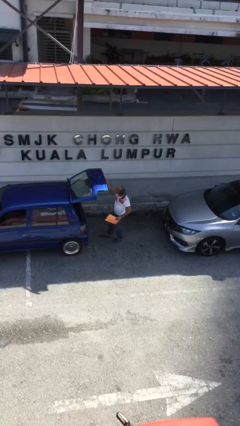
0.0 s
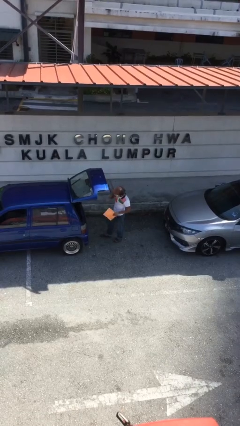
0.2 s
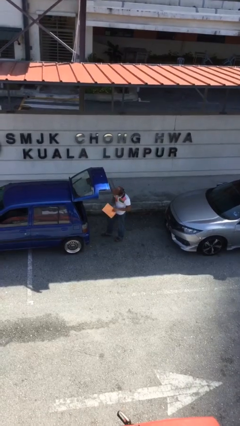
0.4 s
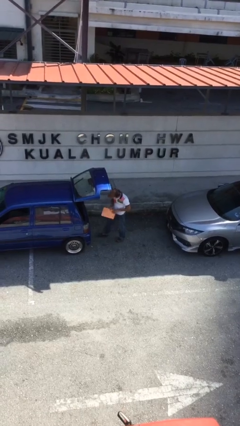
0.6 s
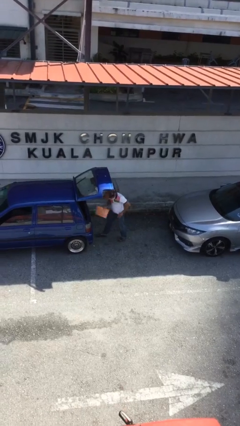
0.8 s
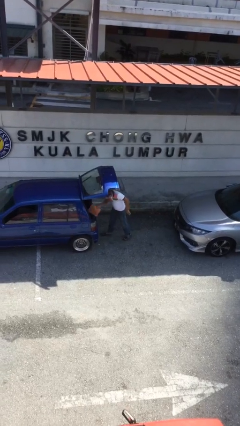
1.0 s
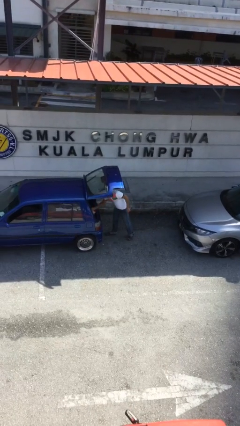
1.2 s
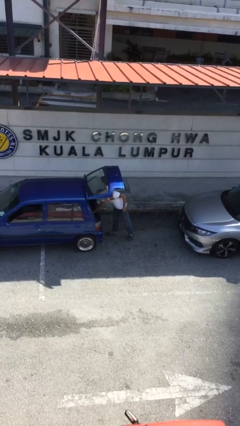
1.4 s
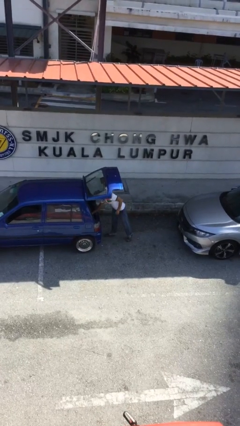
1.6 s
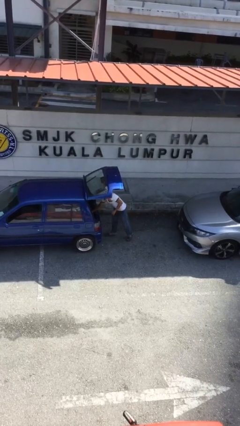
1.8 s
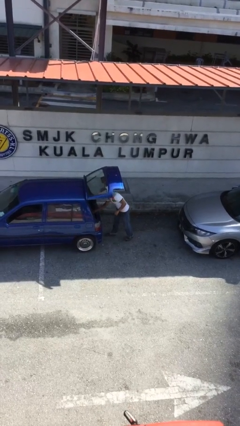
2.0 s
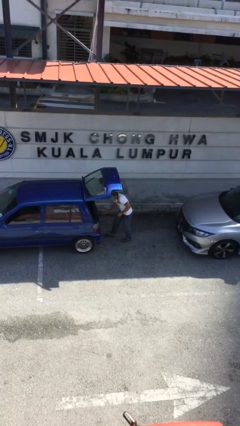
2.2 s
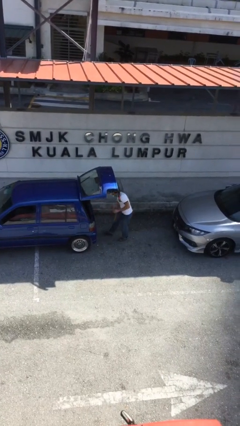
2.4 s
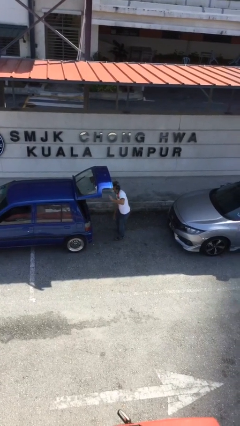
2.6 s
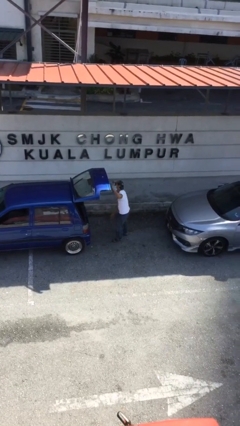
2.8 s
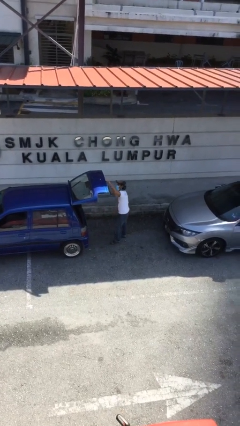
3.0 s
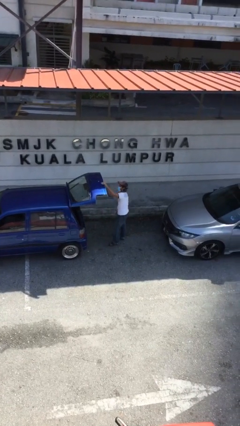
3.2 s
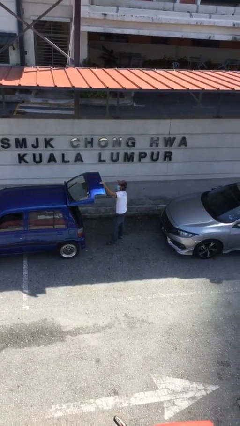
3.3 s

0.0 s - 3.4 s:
person loads car

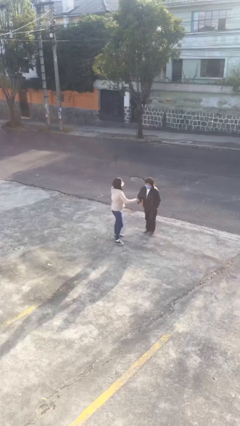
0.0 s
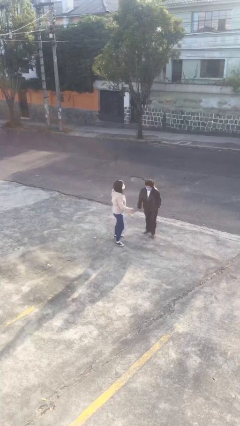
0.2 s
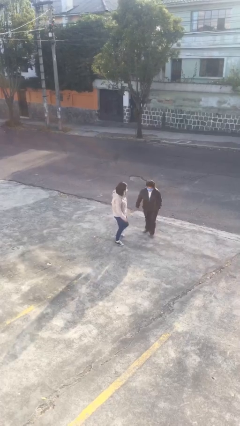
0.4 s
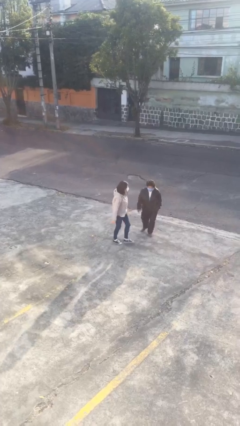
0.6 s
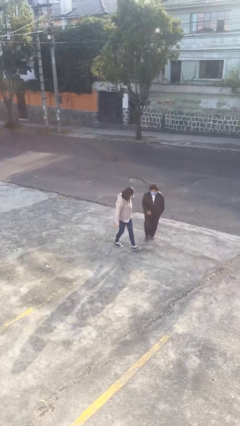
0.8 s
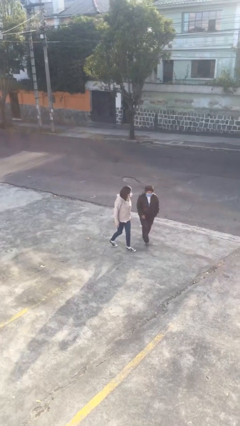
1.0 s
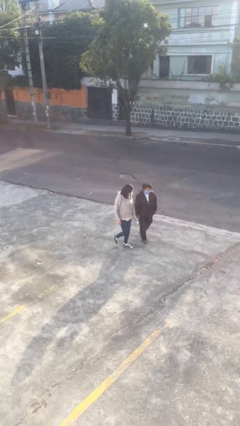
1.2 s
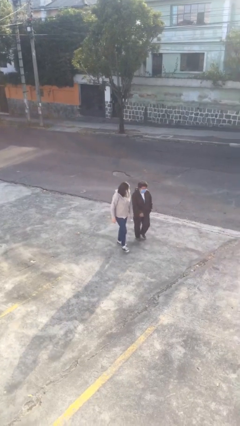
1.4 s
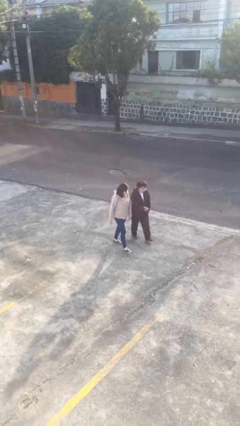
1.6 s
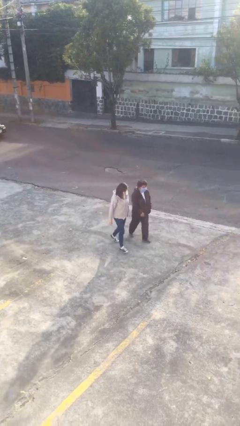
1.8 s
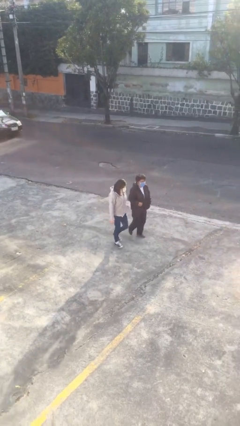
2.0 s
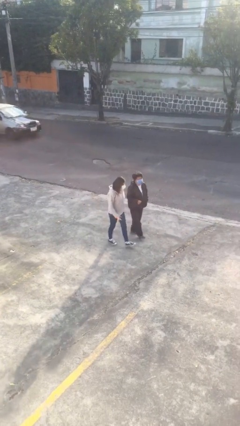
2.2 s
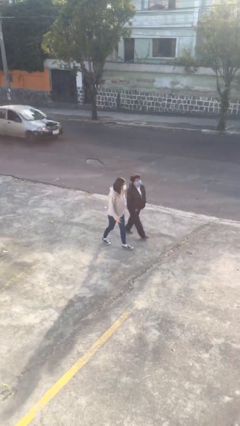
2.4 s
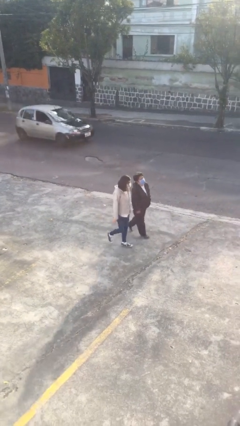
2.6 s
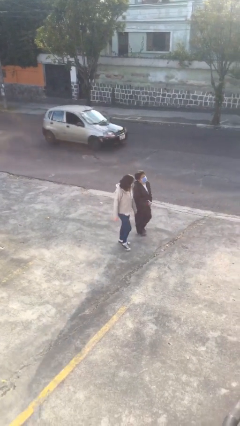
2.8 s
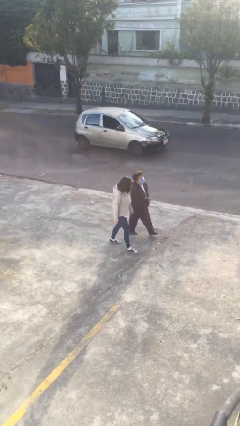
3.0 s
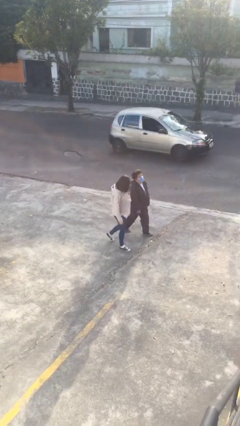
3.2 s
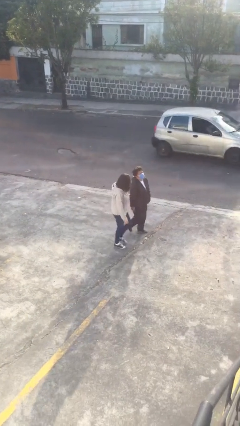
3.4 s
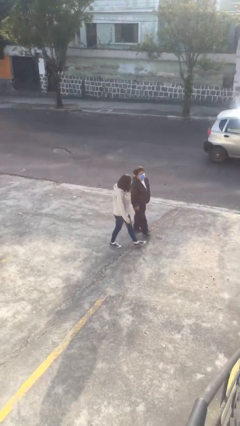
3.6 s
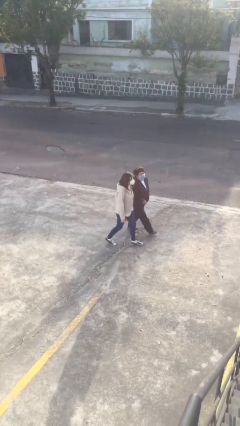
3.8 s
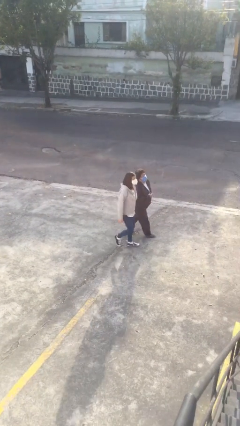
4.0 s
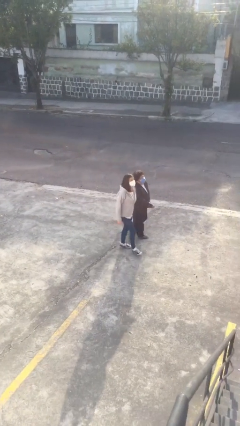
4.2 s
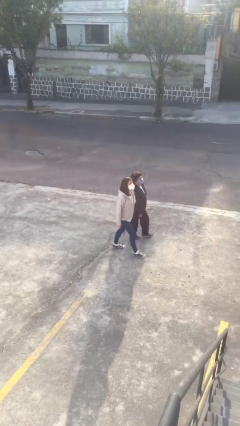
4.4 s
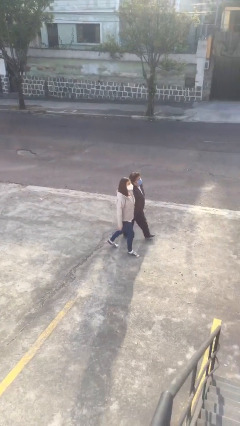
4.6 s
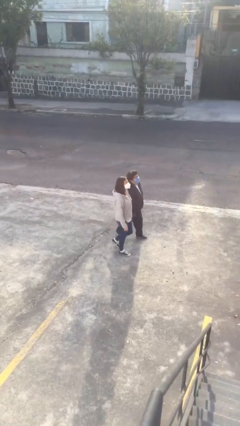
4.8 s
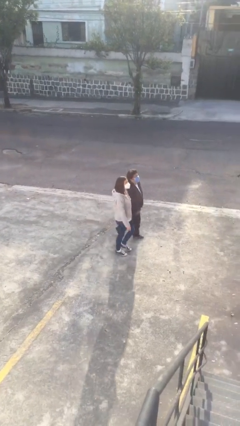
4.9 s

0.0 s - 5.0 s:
person talks to person

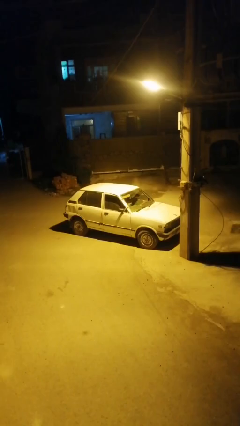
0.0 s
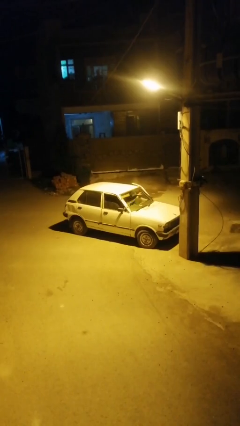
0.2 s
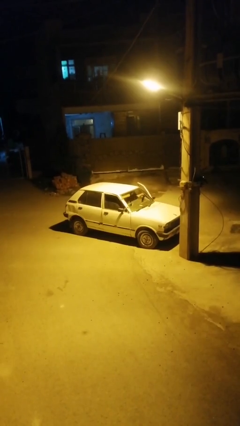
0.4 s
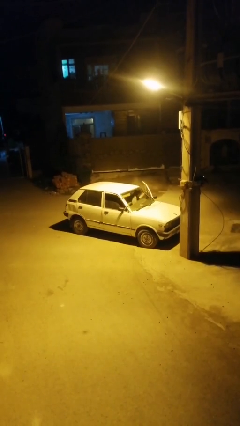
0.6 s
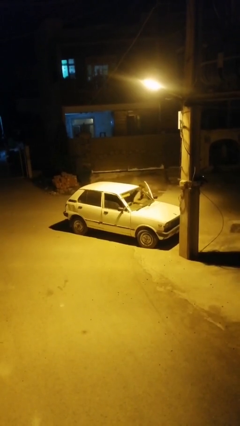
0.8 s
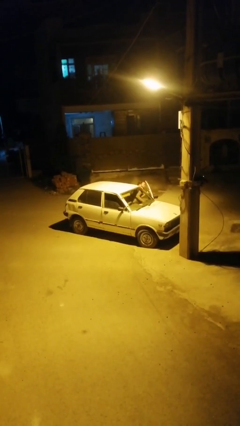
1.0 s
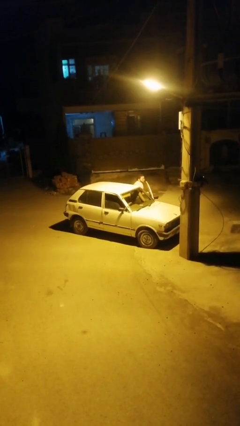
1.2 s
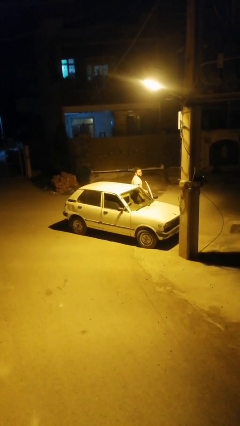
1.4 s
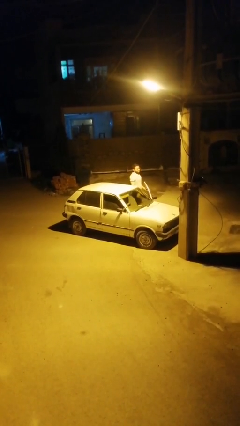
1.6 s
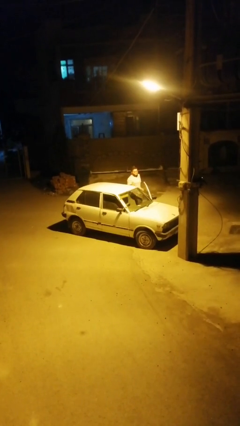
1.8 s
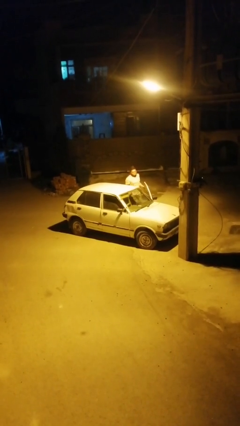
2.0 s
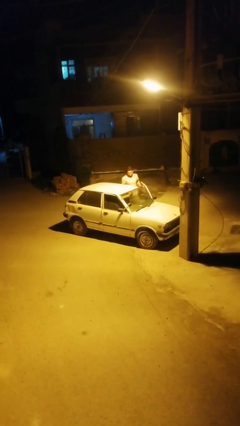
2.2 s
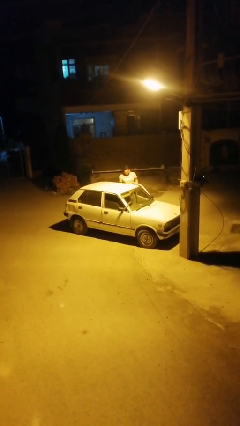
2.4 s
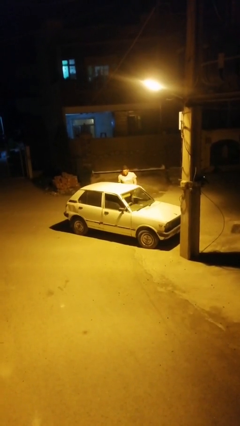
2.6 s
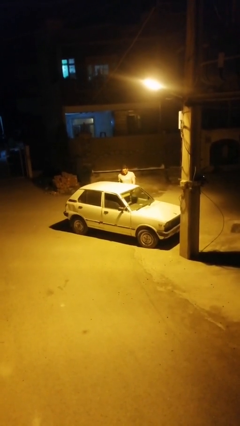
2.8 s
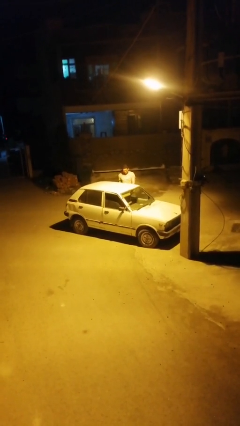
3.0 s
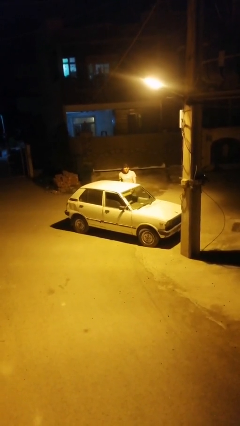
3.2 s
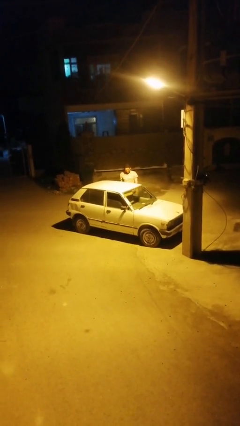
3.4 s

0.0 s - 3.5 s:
car drops off person

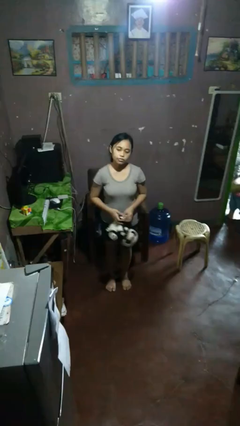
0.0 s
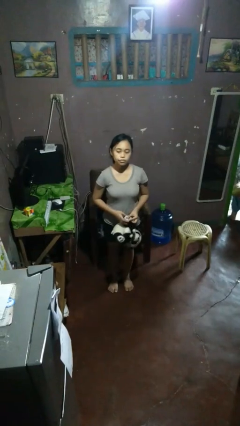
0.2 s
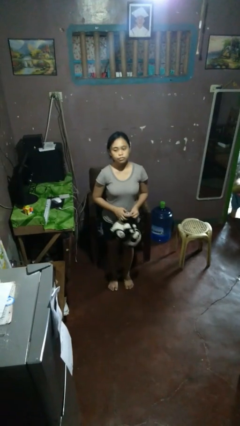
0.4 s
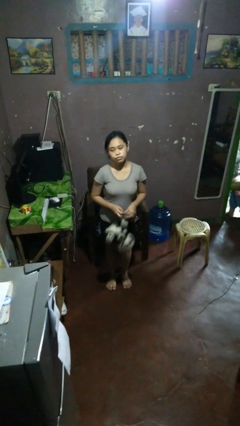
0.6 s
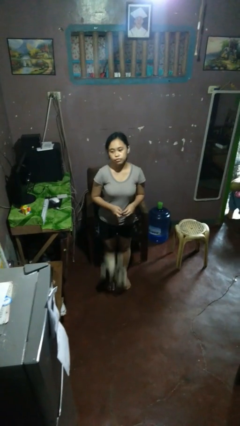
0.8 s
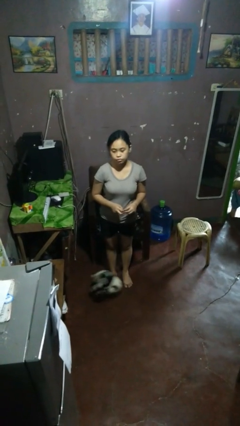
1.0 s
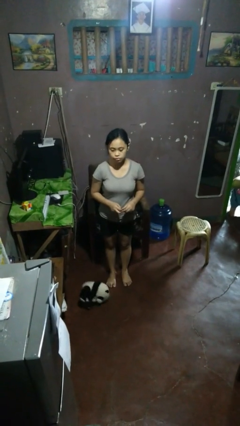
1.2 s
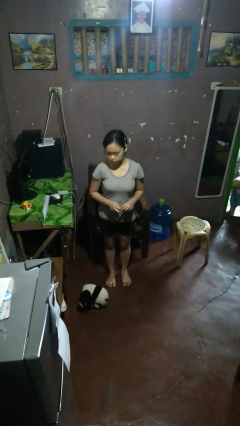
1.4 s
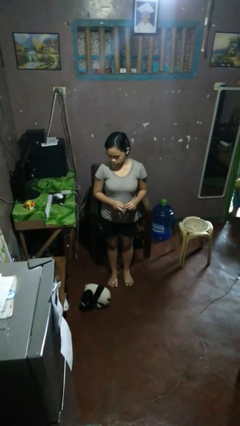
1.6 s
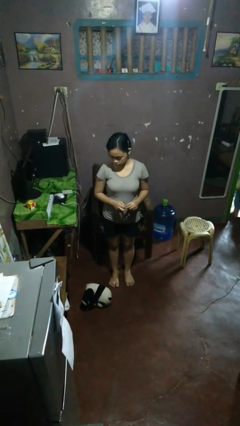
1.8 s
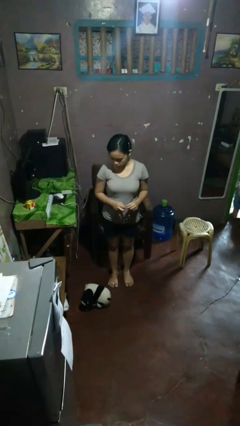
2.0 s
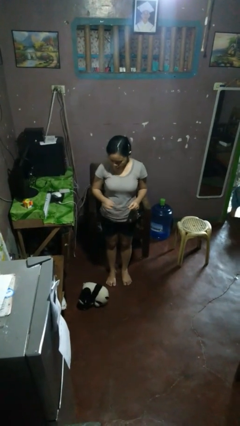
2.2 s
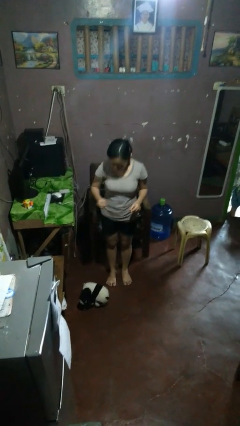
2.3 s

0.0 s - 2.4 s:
person drops object

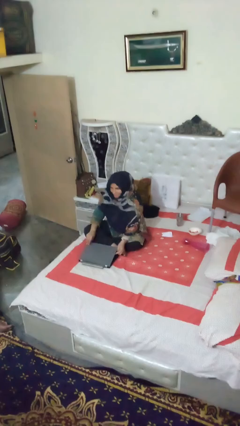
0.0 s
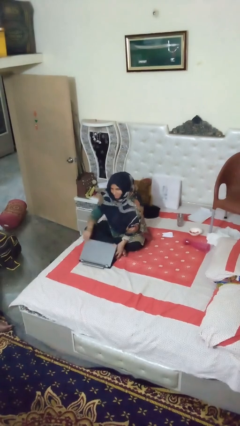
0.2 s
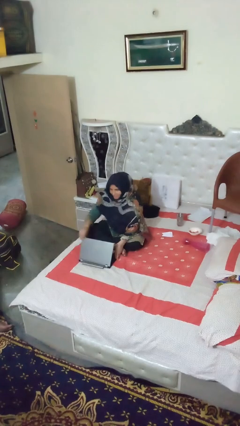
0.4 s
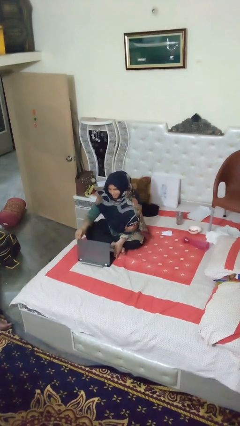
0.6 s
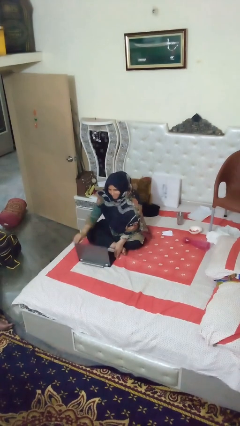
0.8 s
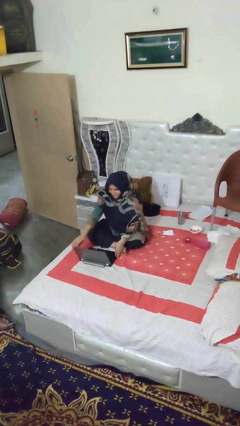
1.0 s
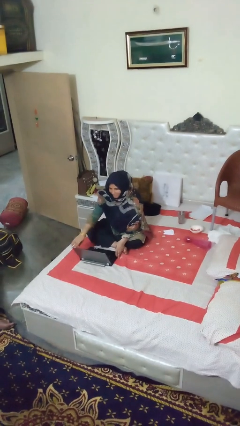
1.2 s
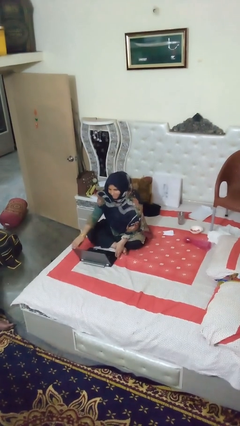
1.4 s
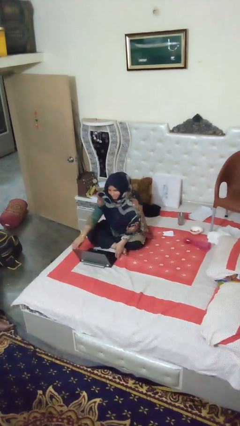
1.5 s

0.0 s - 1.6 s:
person opens laptop

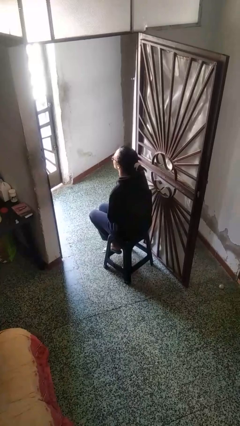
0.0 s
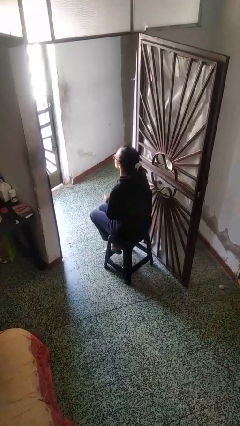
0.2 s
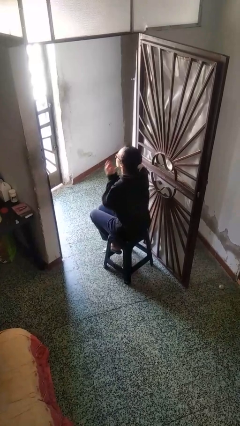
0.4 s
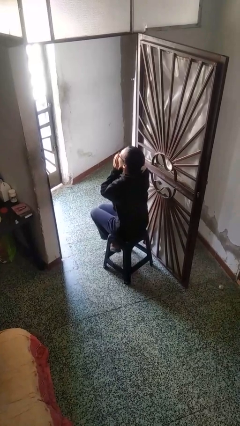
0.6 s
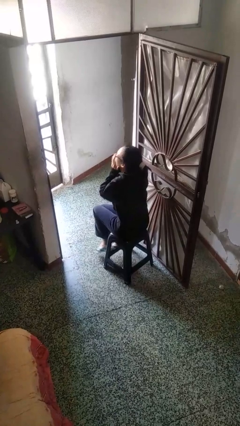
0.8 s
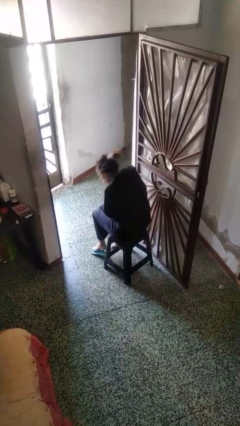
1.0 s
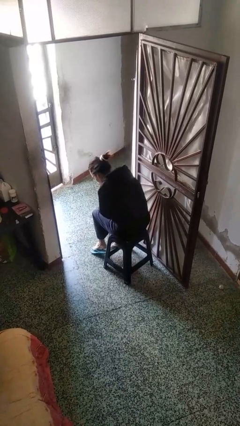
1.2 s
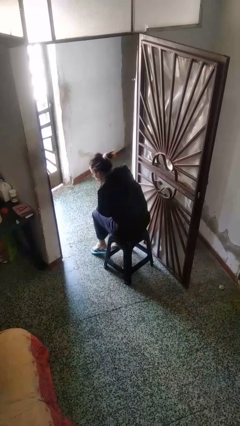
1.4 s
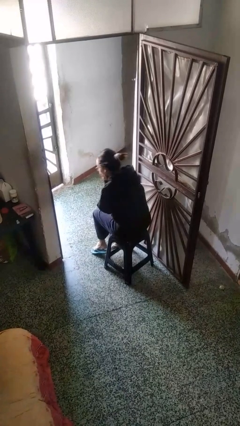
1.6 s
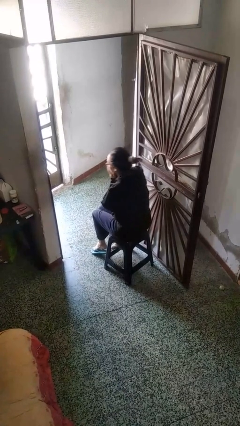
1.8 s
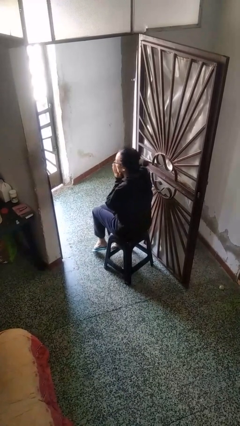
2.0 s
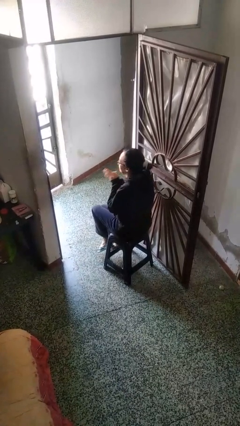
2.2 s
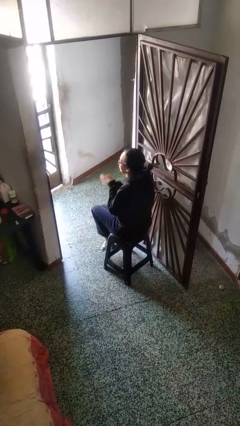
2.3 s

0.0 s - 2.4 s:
person sneezes into hand
